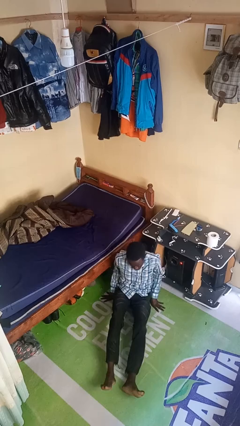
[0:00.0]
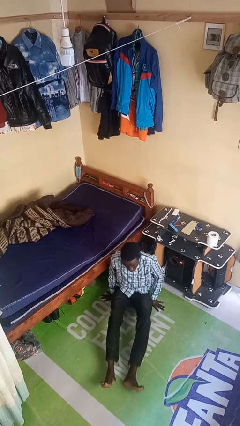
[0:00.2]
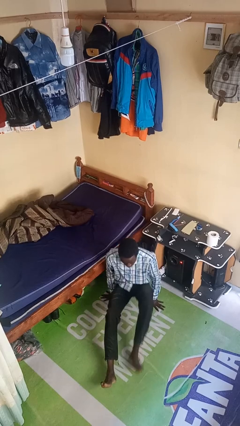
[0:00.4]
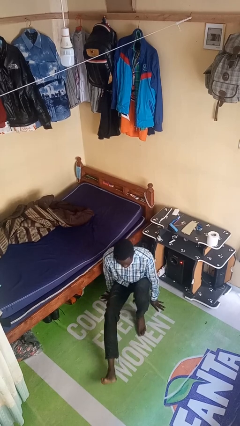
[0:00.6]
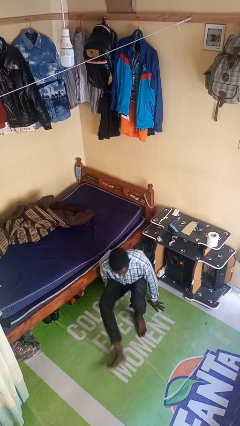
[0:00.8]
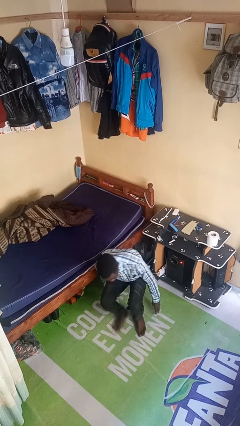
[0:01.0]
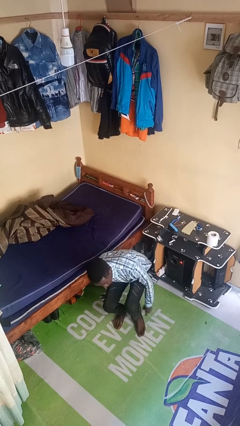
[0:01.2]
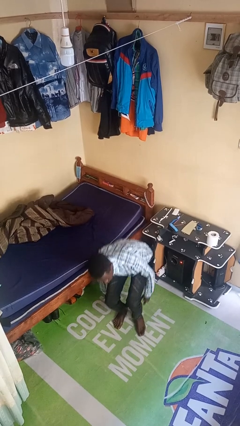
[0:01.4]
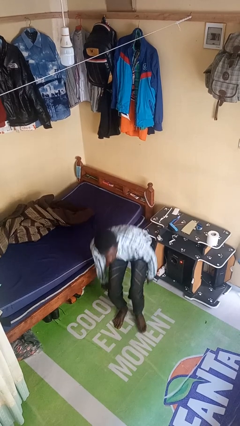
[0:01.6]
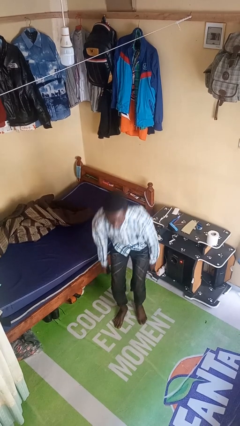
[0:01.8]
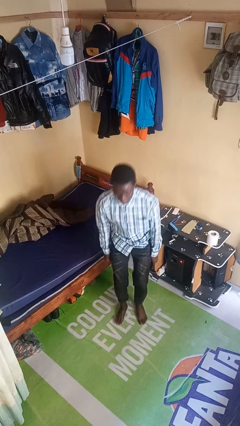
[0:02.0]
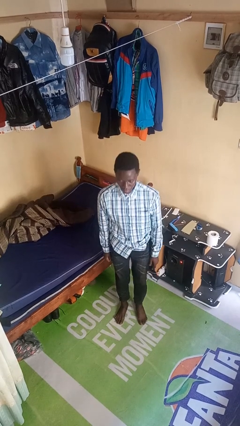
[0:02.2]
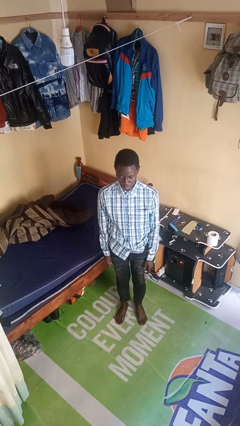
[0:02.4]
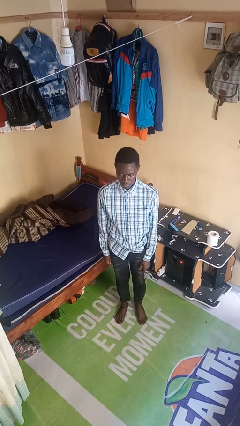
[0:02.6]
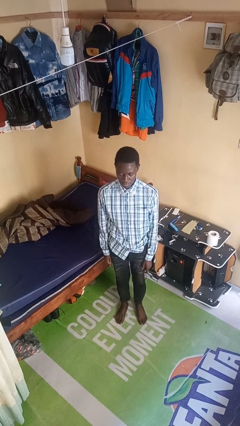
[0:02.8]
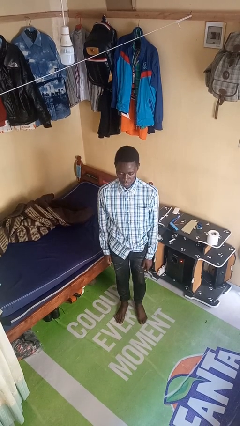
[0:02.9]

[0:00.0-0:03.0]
person stands up from floor

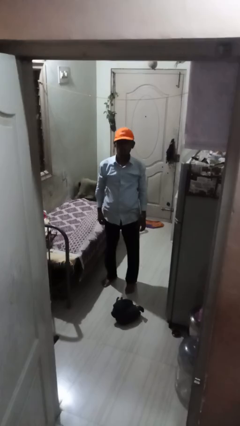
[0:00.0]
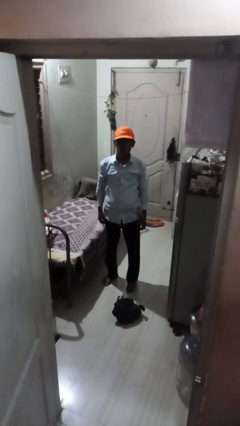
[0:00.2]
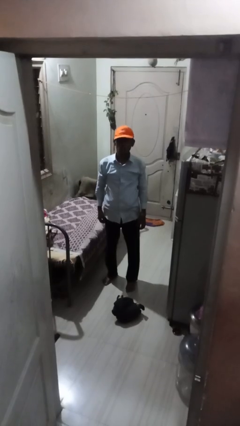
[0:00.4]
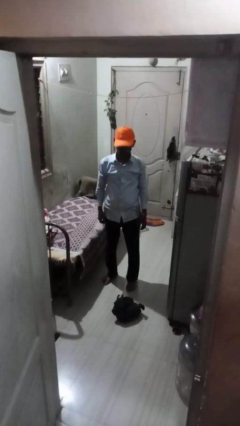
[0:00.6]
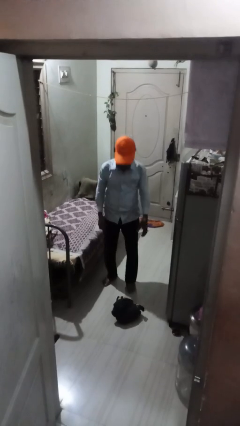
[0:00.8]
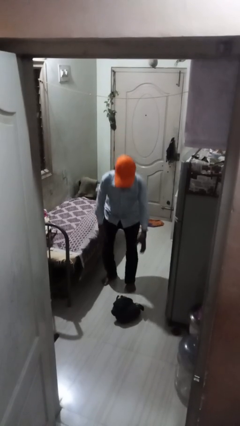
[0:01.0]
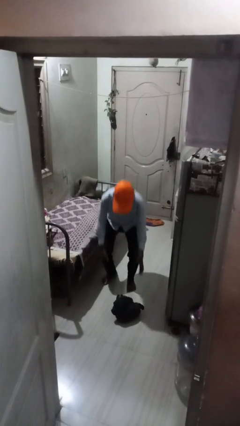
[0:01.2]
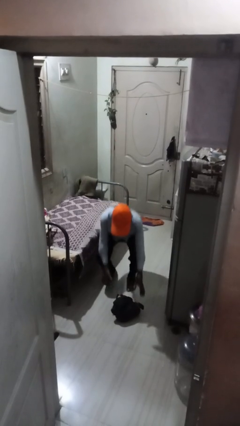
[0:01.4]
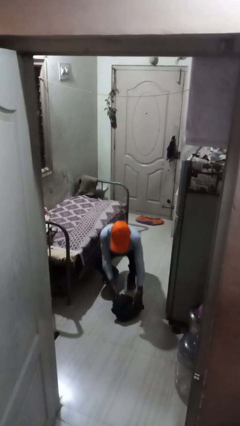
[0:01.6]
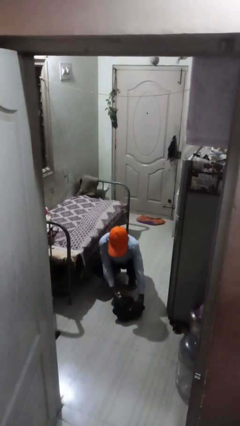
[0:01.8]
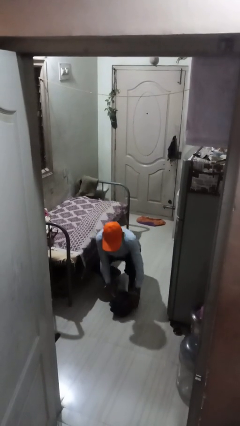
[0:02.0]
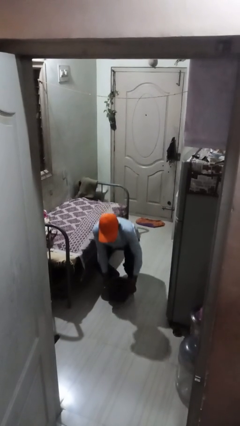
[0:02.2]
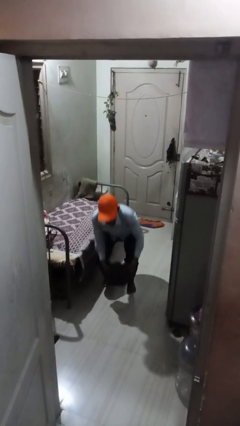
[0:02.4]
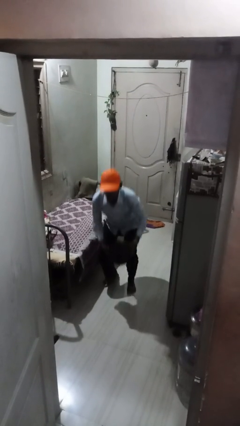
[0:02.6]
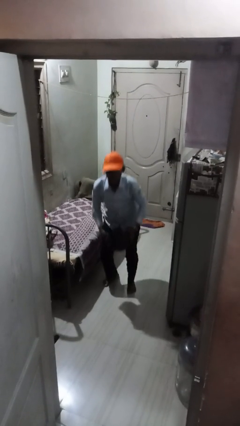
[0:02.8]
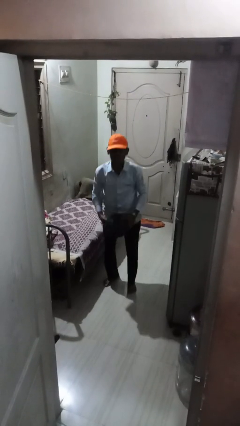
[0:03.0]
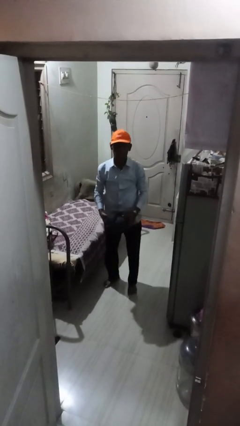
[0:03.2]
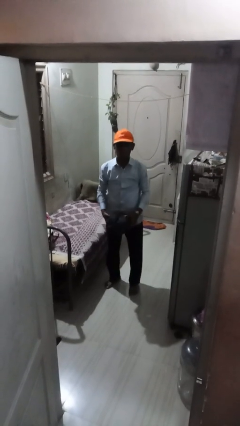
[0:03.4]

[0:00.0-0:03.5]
person picks up object from floor

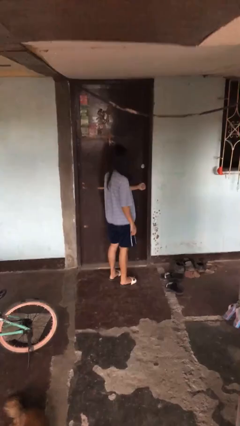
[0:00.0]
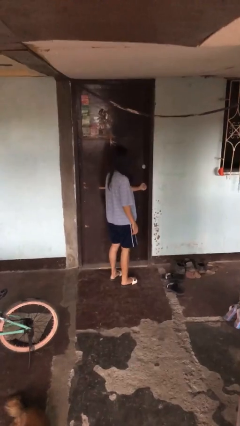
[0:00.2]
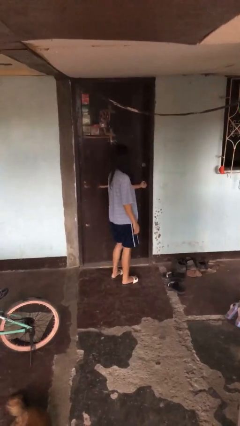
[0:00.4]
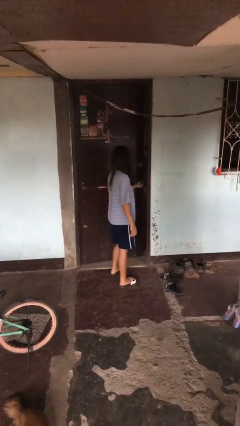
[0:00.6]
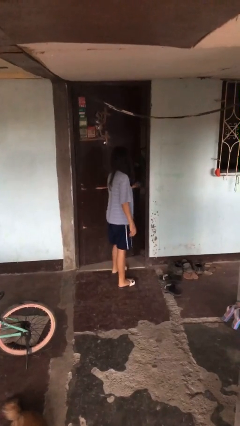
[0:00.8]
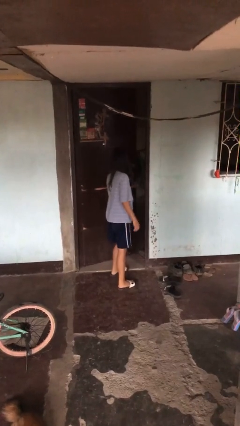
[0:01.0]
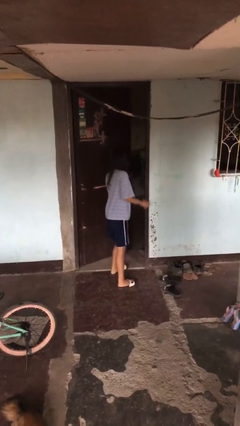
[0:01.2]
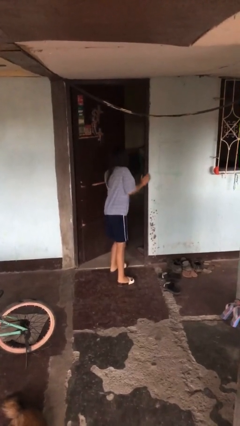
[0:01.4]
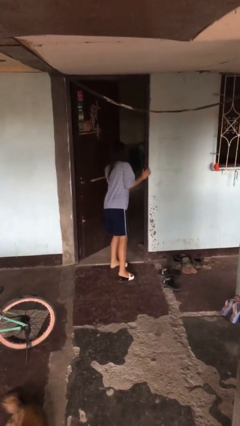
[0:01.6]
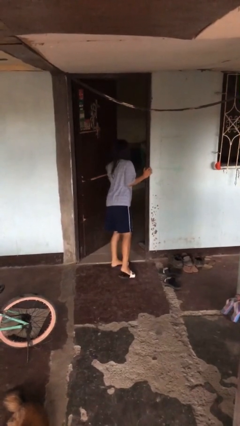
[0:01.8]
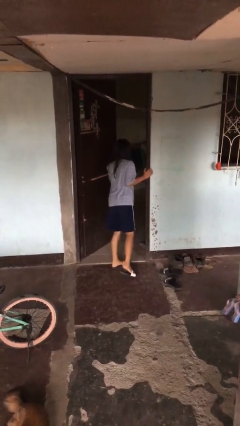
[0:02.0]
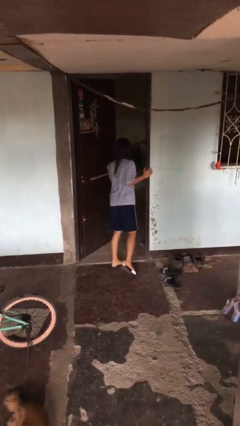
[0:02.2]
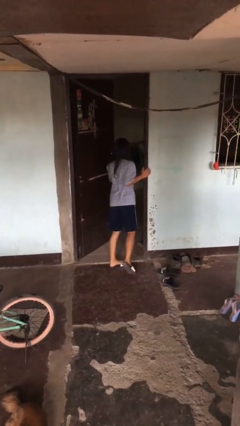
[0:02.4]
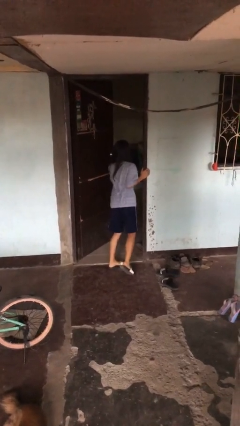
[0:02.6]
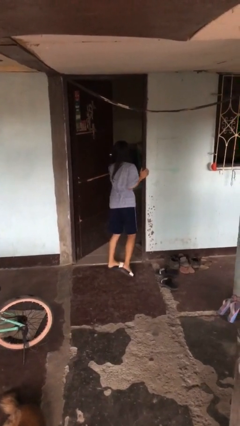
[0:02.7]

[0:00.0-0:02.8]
person opens facility door

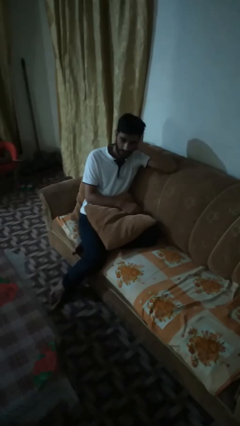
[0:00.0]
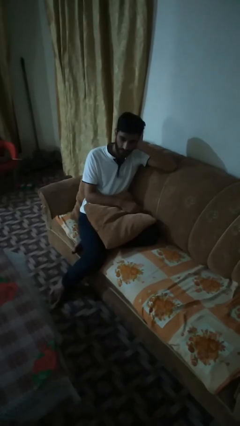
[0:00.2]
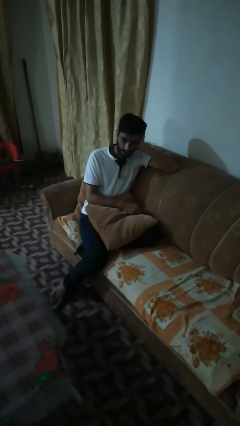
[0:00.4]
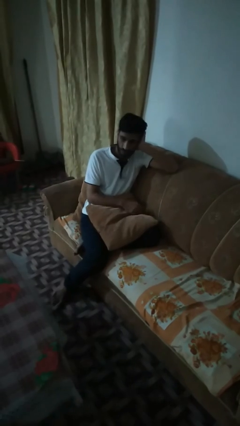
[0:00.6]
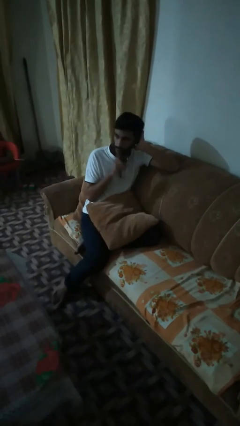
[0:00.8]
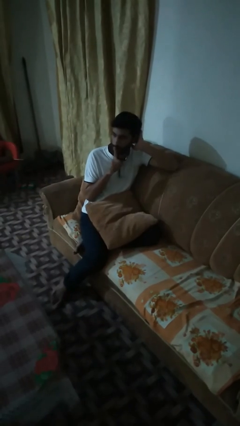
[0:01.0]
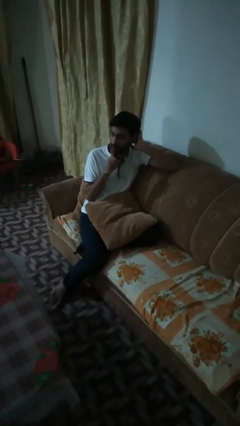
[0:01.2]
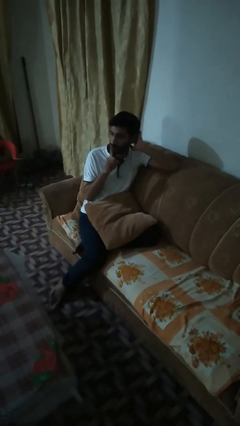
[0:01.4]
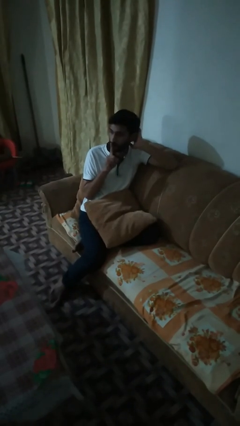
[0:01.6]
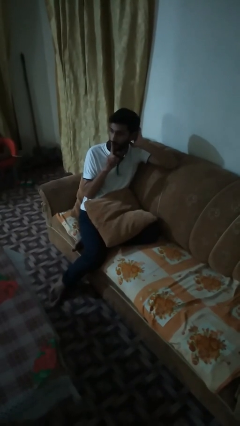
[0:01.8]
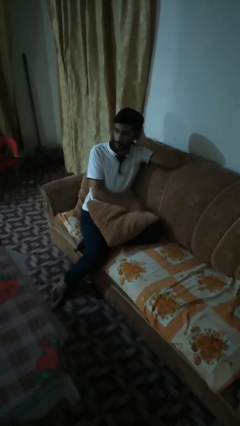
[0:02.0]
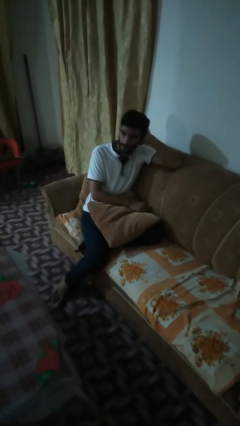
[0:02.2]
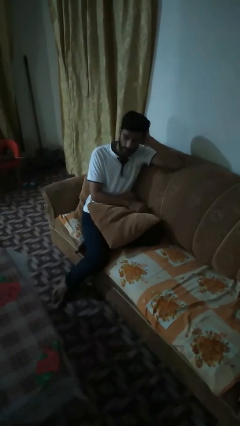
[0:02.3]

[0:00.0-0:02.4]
person gestures be quiet

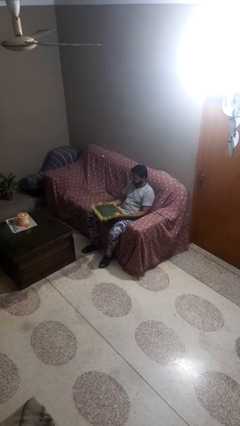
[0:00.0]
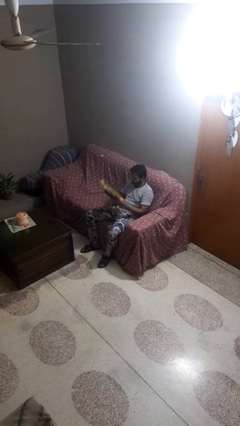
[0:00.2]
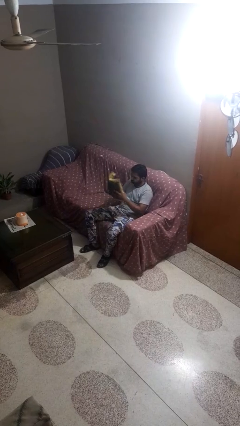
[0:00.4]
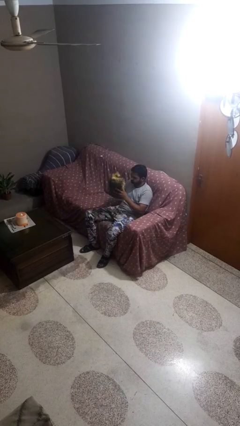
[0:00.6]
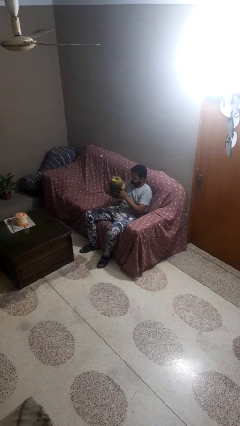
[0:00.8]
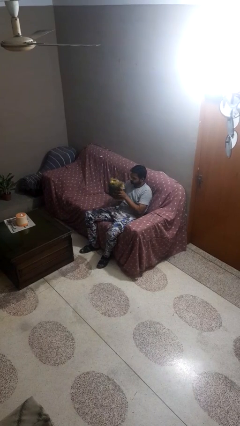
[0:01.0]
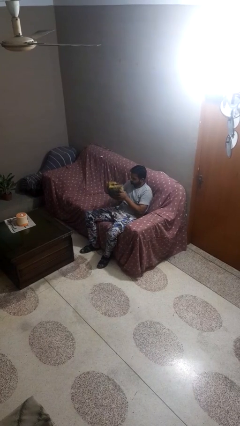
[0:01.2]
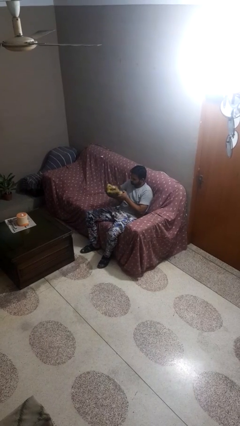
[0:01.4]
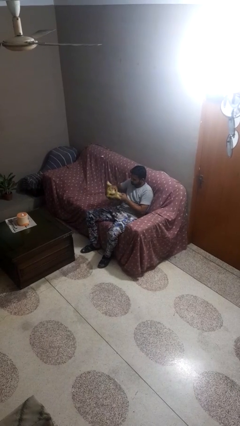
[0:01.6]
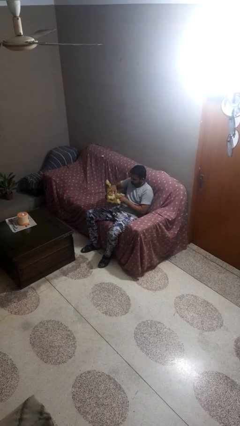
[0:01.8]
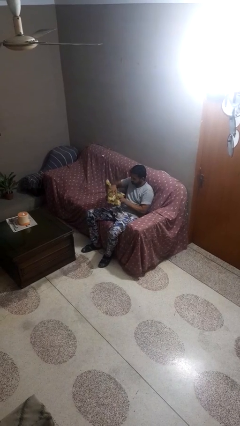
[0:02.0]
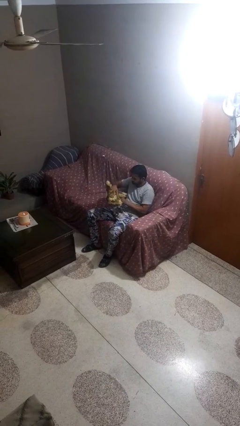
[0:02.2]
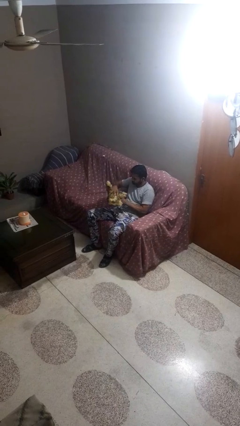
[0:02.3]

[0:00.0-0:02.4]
person squeezes object

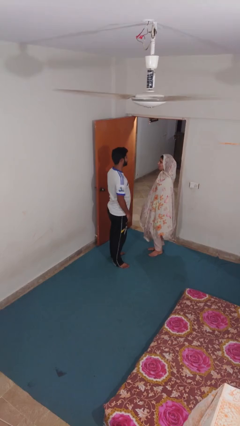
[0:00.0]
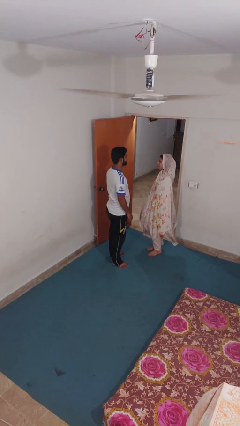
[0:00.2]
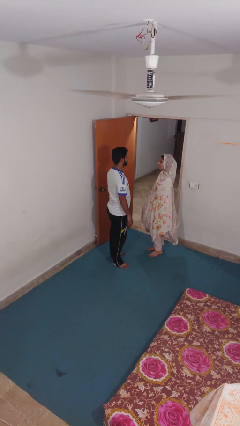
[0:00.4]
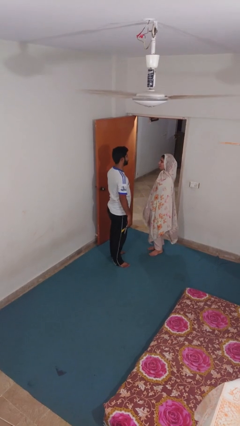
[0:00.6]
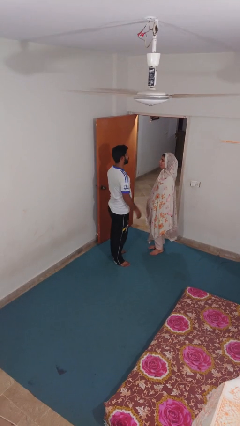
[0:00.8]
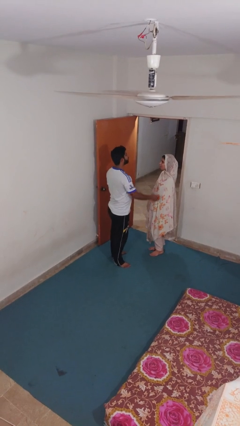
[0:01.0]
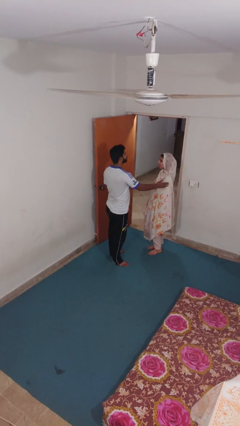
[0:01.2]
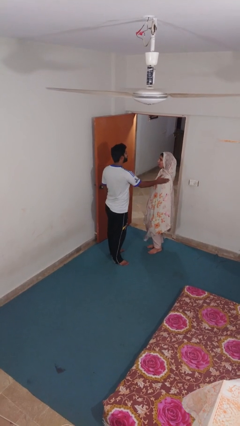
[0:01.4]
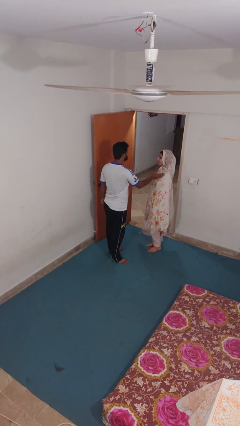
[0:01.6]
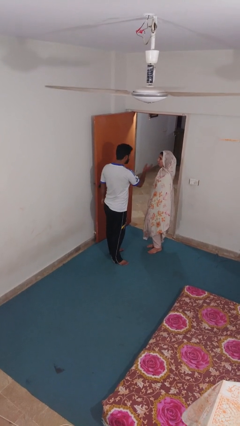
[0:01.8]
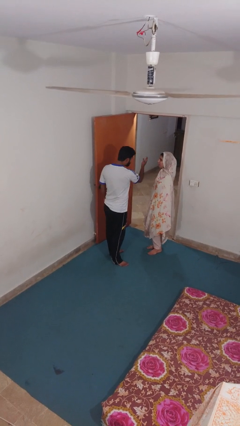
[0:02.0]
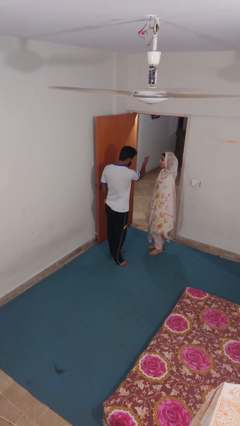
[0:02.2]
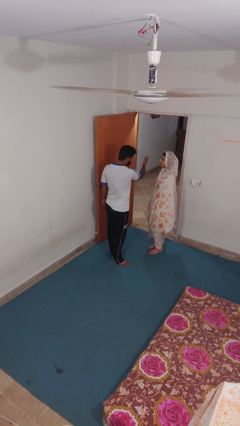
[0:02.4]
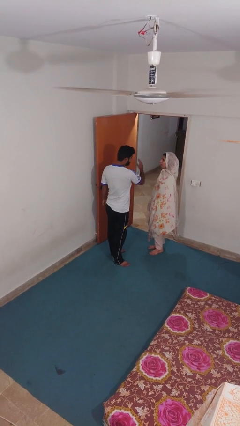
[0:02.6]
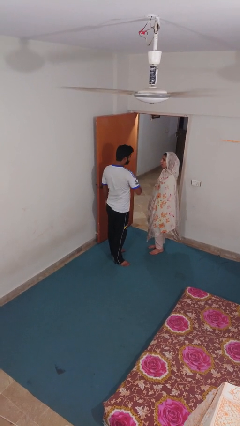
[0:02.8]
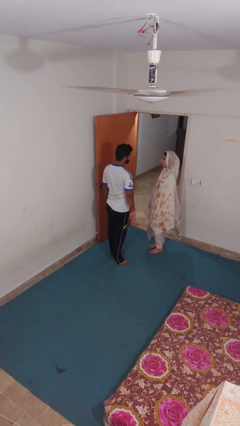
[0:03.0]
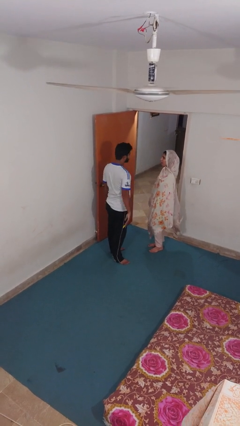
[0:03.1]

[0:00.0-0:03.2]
person shoves person
